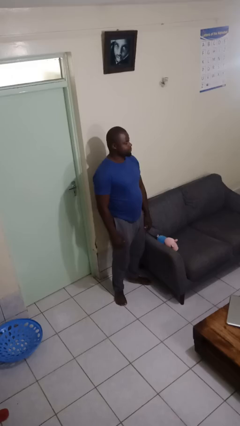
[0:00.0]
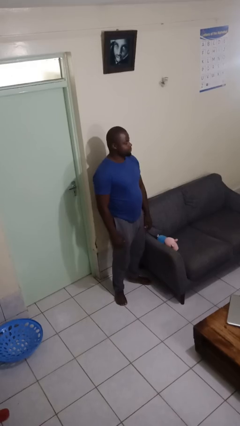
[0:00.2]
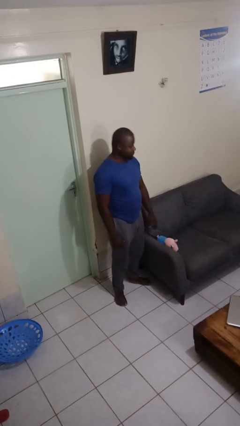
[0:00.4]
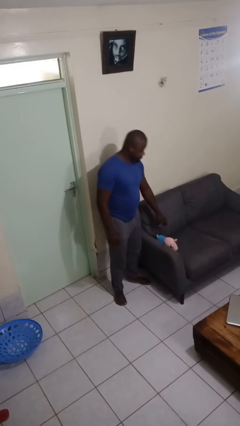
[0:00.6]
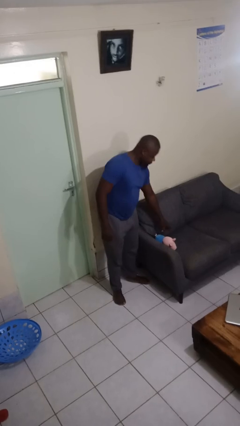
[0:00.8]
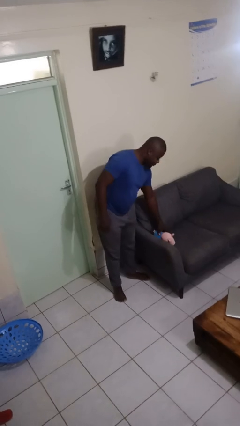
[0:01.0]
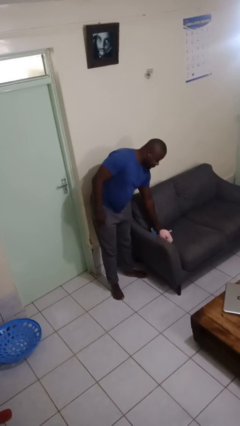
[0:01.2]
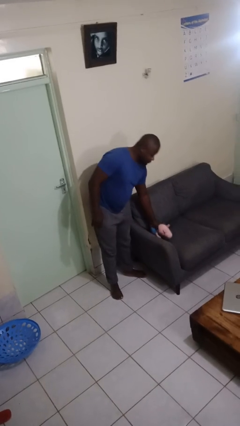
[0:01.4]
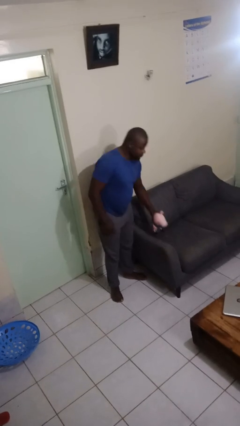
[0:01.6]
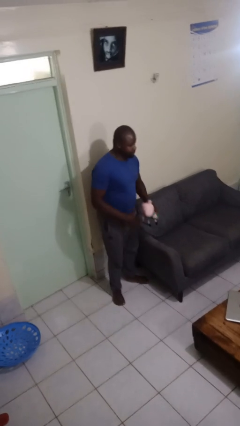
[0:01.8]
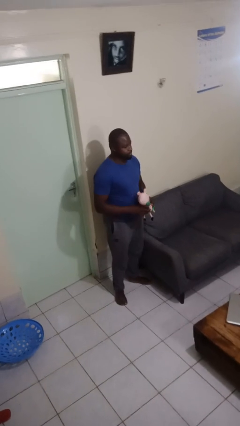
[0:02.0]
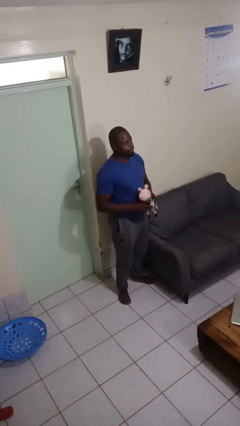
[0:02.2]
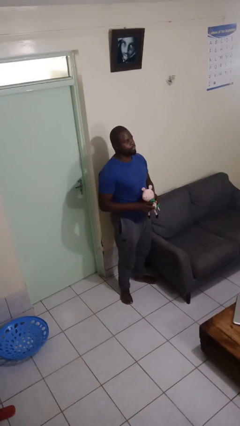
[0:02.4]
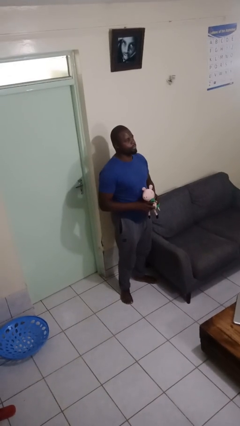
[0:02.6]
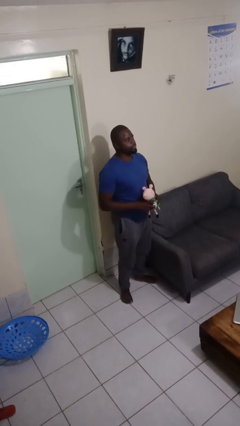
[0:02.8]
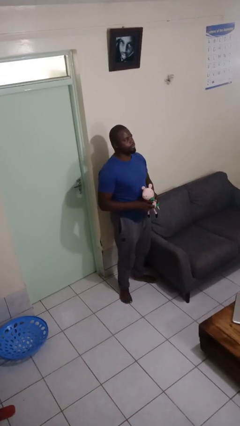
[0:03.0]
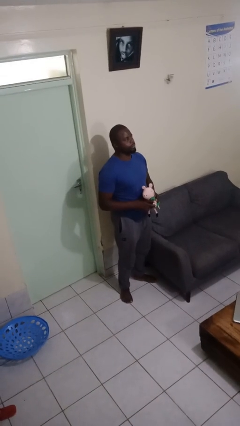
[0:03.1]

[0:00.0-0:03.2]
person picks up object from couch

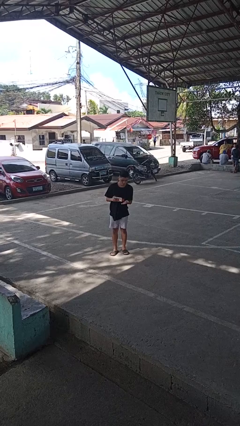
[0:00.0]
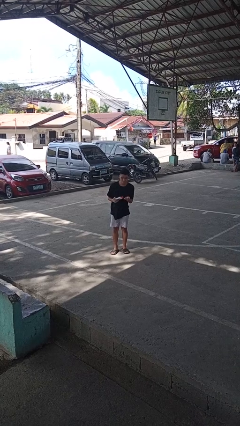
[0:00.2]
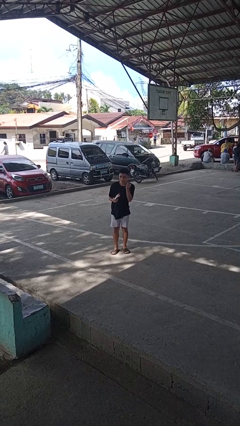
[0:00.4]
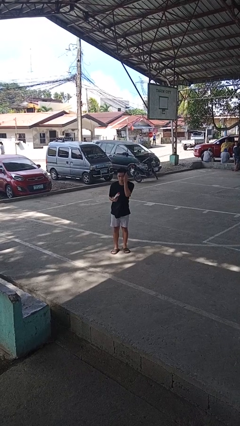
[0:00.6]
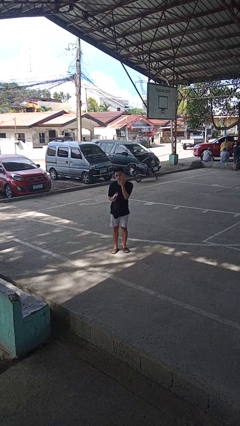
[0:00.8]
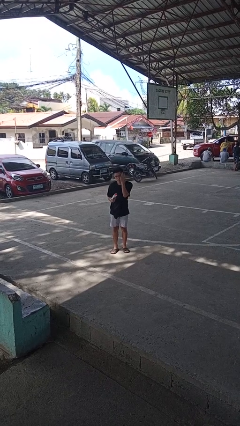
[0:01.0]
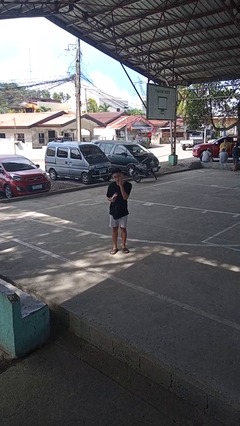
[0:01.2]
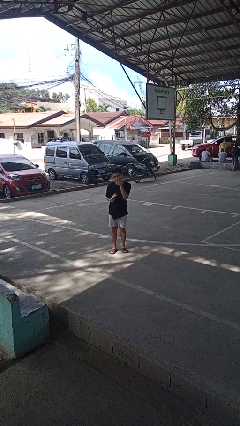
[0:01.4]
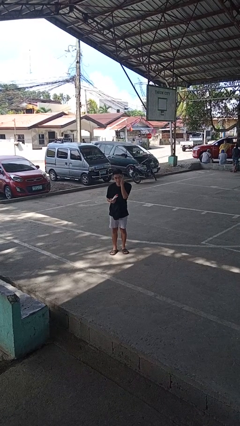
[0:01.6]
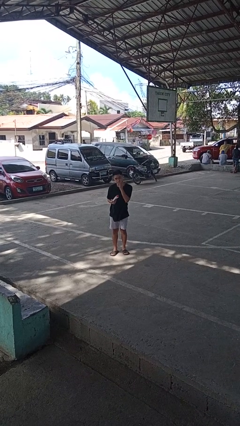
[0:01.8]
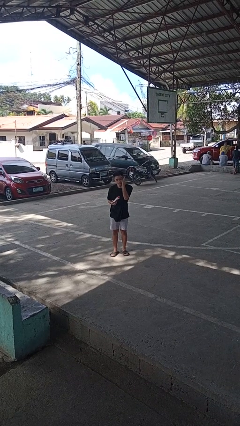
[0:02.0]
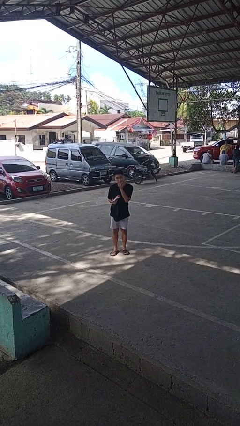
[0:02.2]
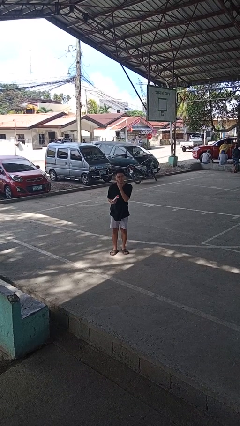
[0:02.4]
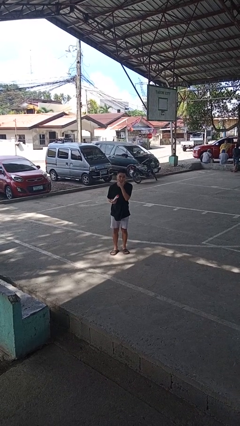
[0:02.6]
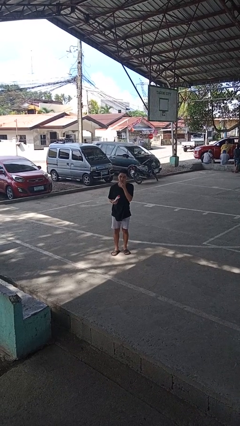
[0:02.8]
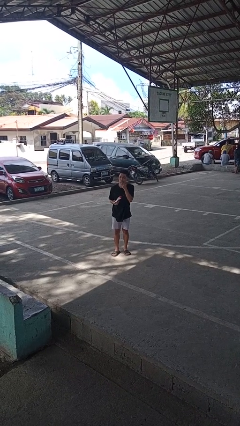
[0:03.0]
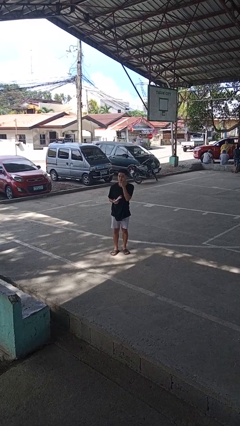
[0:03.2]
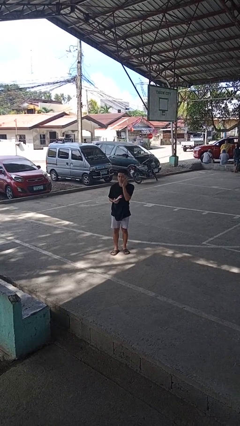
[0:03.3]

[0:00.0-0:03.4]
person applies facial moisturizer

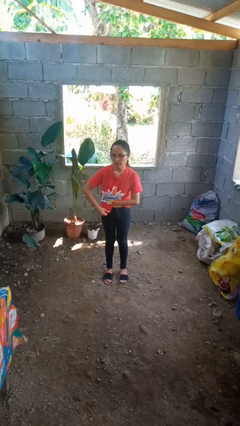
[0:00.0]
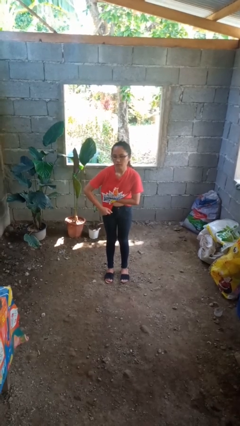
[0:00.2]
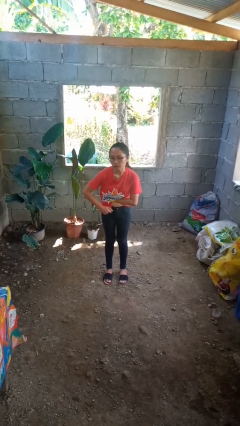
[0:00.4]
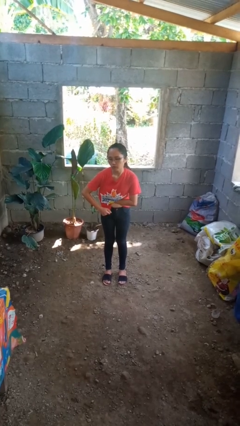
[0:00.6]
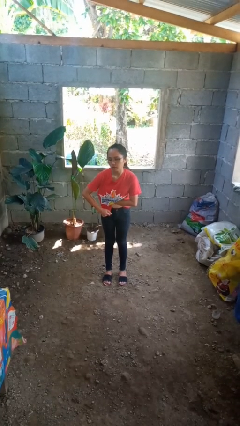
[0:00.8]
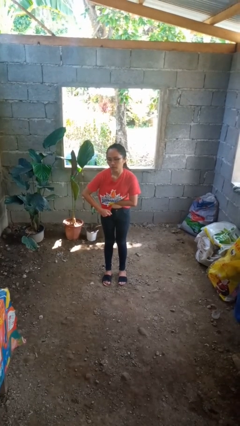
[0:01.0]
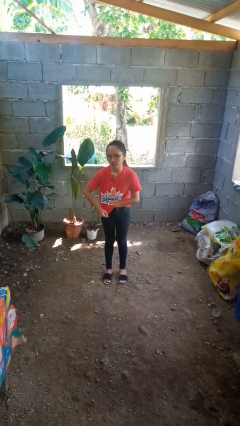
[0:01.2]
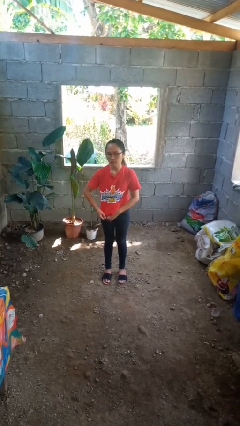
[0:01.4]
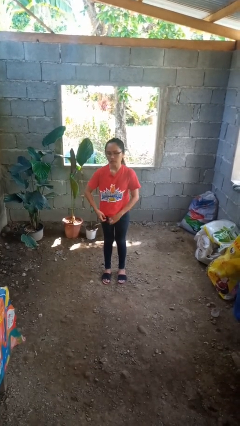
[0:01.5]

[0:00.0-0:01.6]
person applies deodorant

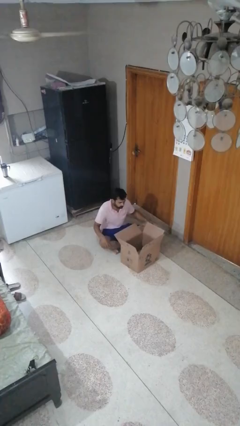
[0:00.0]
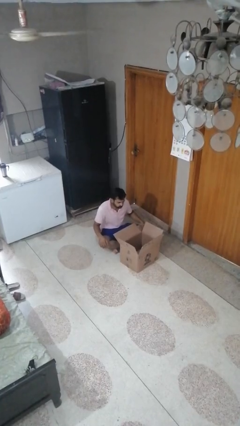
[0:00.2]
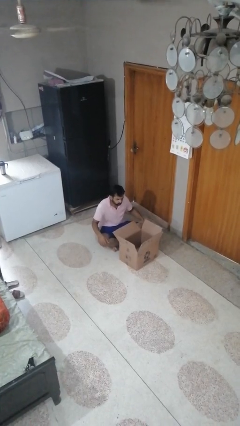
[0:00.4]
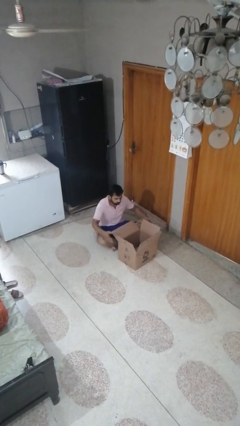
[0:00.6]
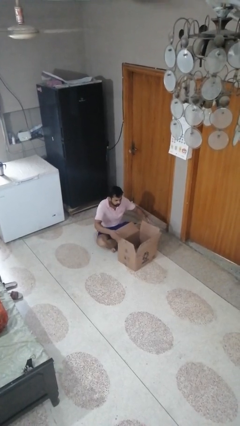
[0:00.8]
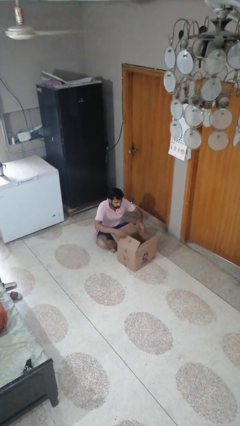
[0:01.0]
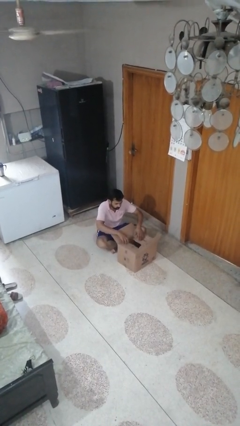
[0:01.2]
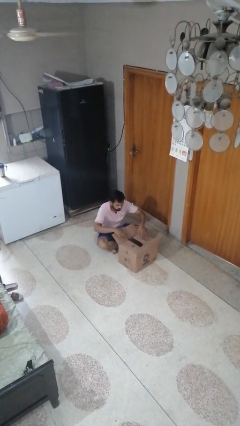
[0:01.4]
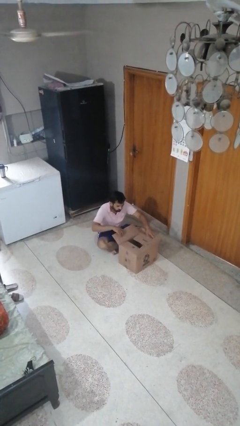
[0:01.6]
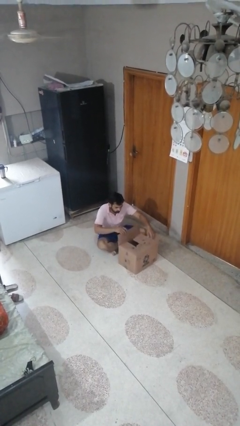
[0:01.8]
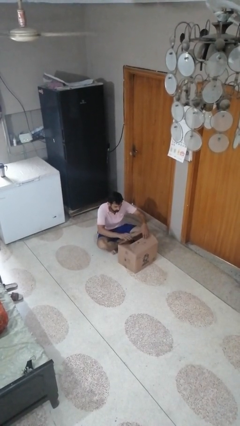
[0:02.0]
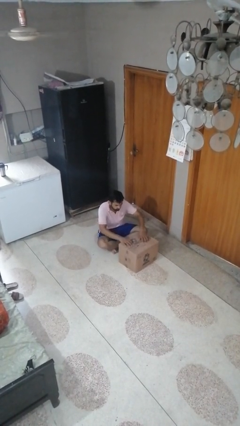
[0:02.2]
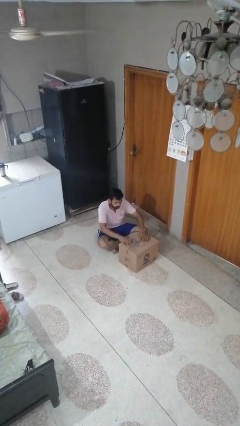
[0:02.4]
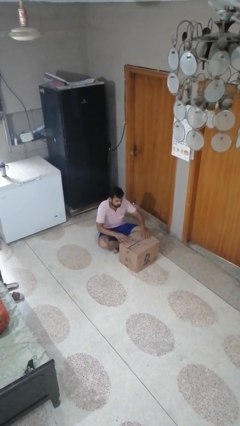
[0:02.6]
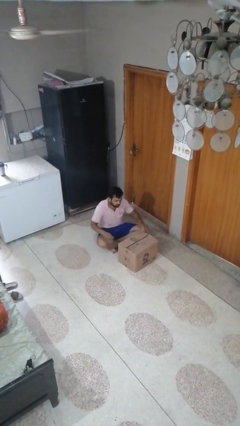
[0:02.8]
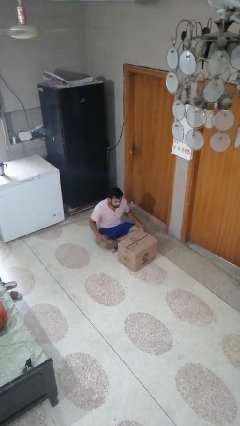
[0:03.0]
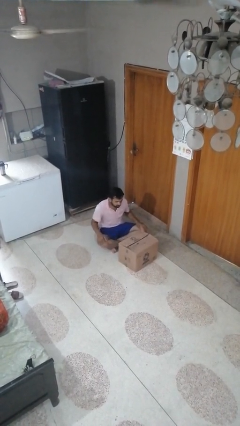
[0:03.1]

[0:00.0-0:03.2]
person closes box

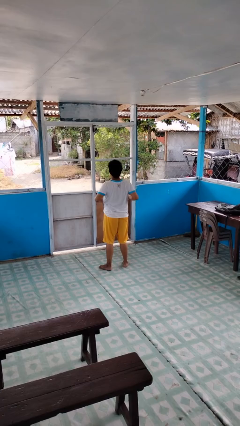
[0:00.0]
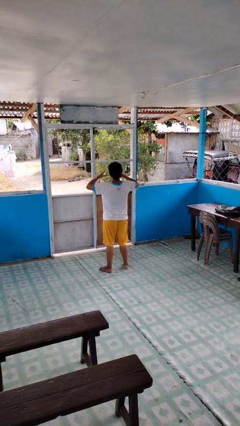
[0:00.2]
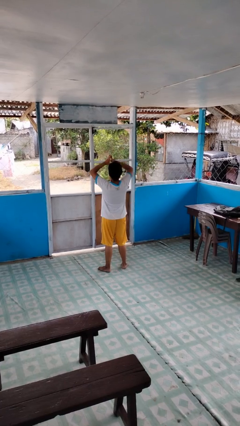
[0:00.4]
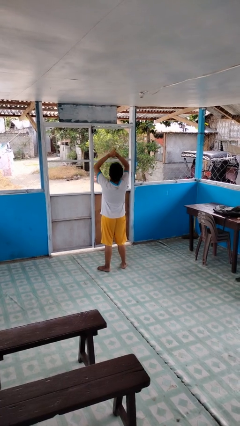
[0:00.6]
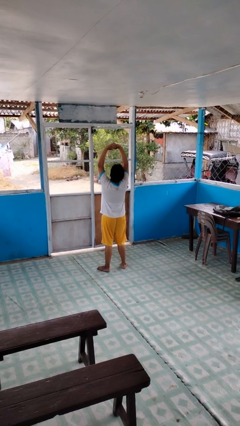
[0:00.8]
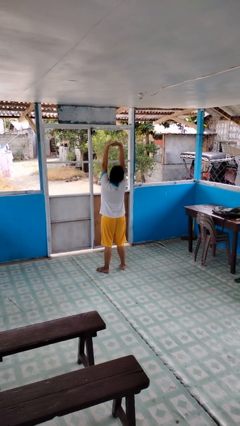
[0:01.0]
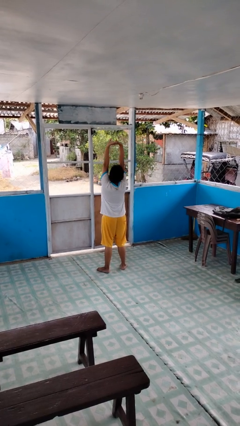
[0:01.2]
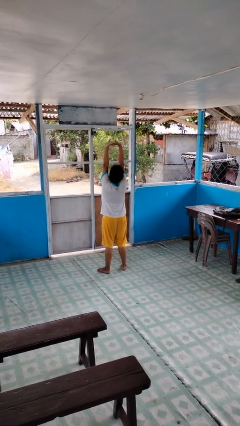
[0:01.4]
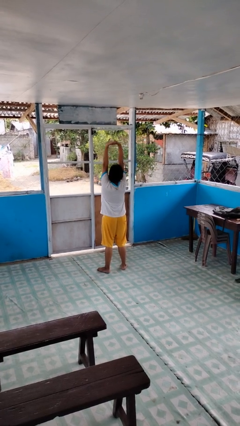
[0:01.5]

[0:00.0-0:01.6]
person stretches arms over head

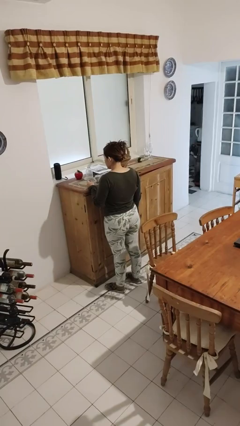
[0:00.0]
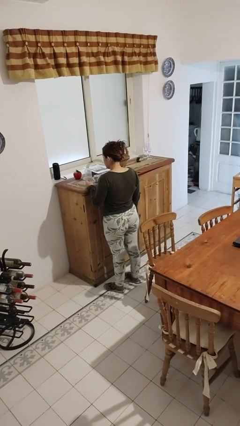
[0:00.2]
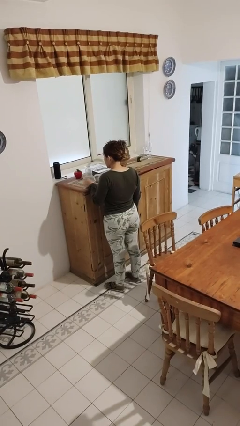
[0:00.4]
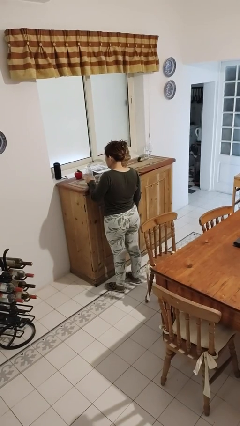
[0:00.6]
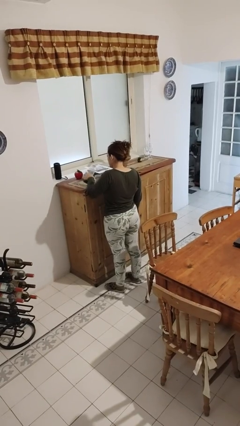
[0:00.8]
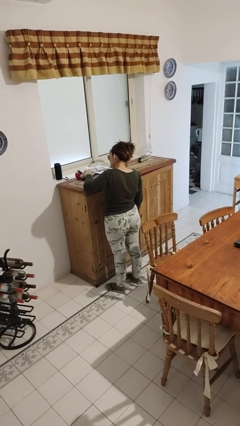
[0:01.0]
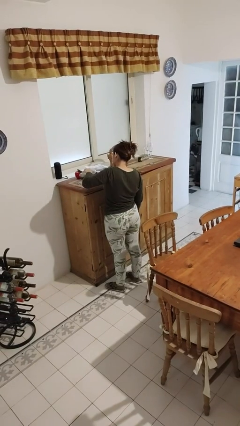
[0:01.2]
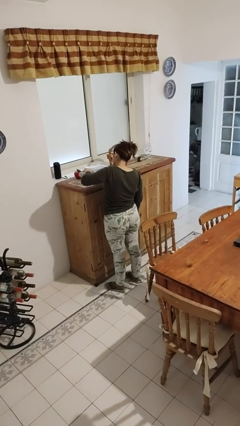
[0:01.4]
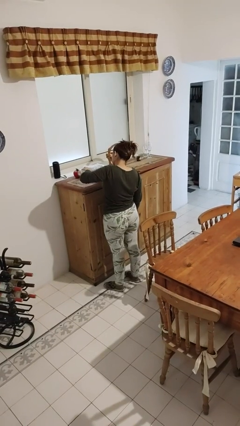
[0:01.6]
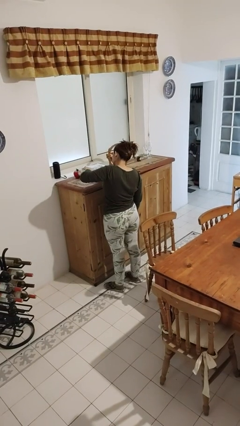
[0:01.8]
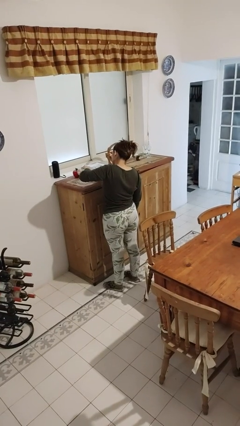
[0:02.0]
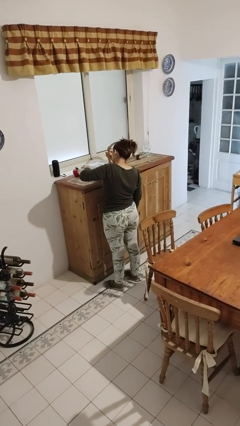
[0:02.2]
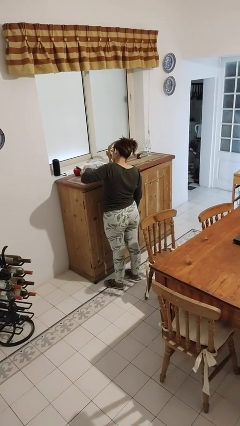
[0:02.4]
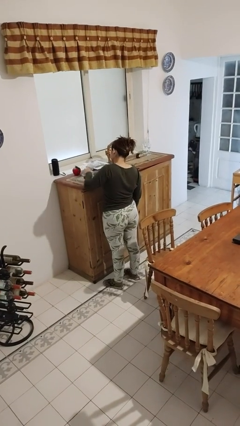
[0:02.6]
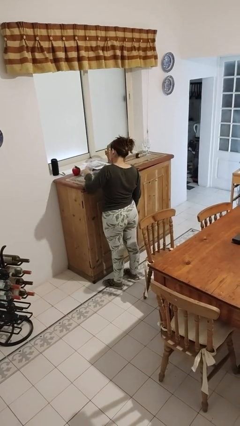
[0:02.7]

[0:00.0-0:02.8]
person pours liquid into cup

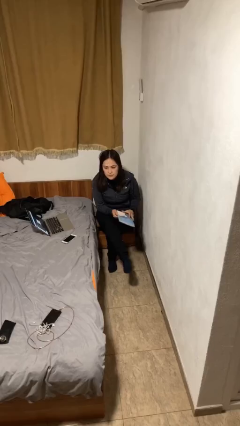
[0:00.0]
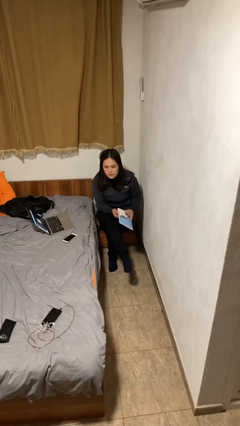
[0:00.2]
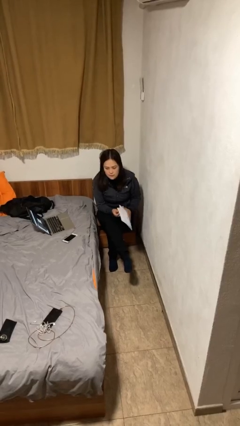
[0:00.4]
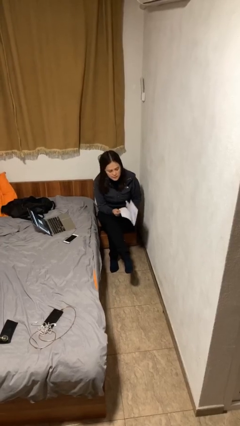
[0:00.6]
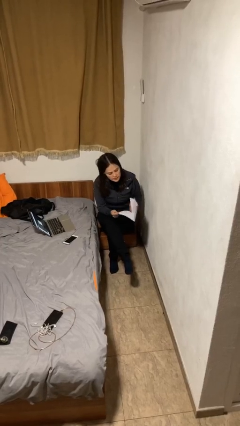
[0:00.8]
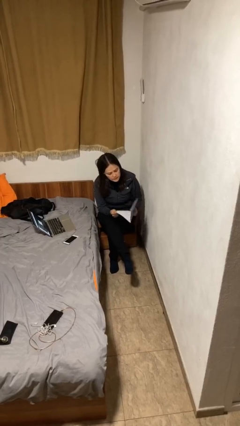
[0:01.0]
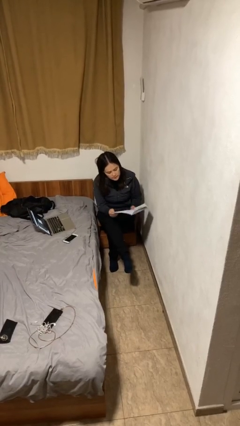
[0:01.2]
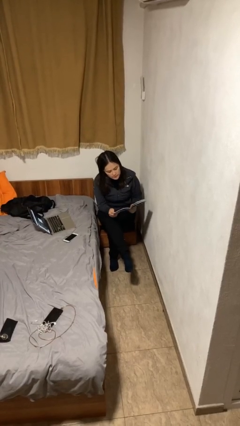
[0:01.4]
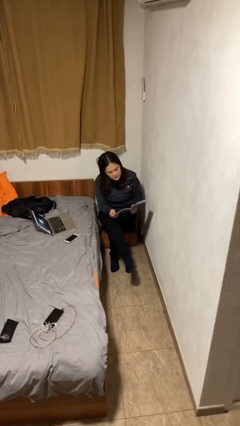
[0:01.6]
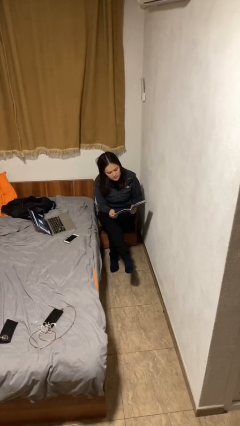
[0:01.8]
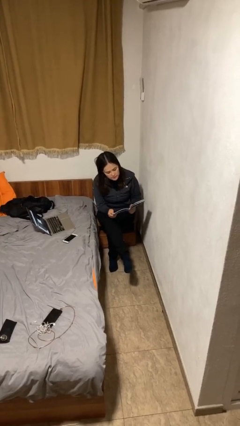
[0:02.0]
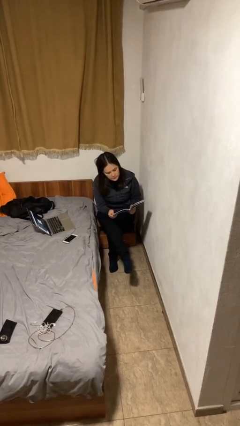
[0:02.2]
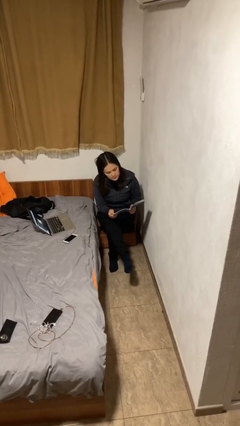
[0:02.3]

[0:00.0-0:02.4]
person reads document
